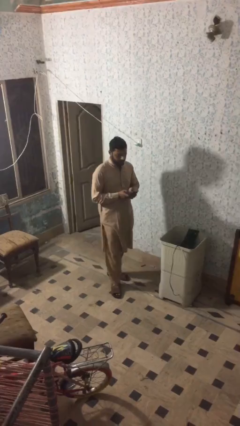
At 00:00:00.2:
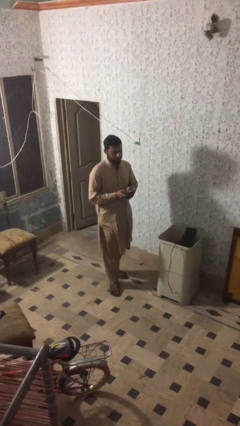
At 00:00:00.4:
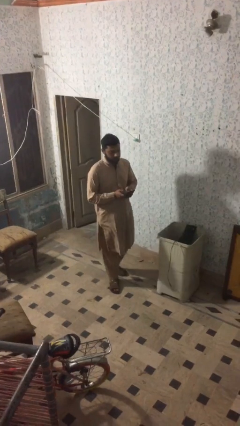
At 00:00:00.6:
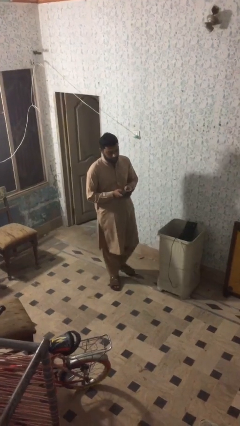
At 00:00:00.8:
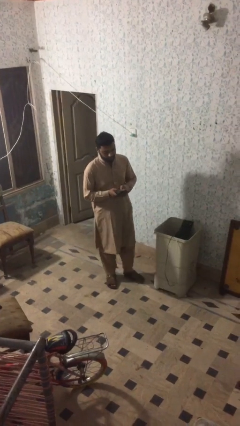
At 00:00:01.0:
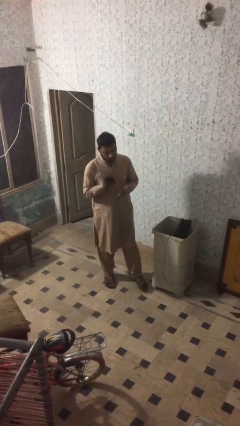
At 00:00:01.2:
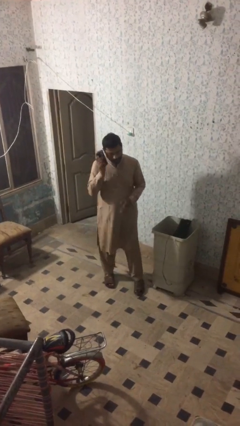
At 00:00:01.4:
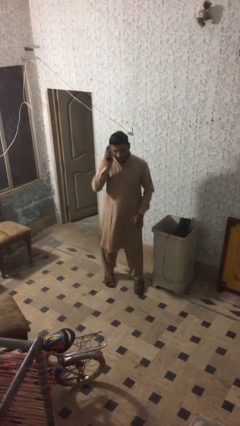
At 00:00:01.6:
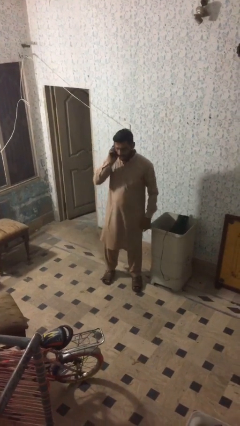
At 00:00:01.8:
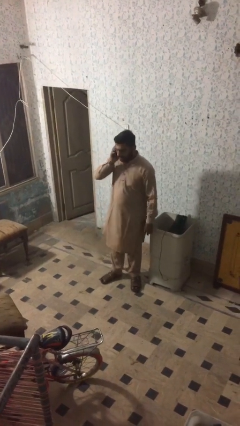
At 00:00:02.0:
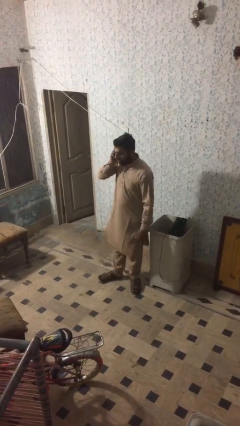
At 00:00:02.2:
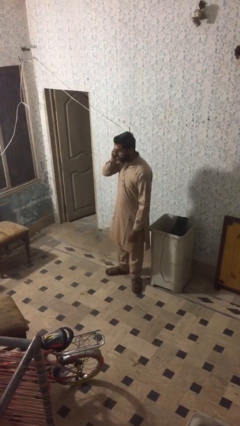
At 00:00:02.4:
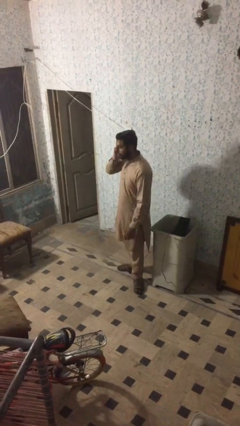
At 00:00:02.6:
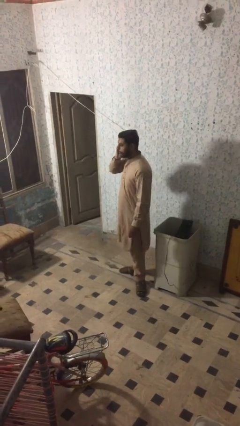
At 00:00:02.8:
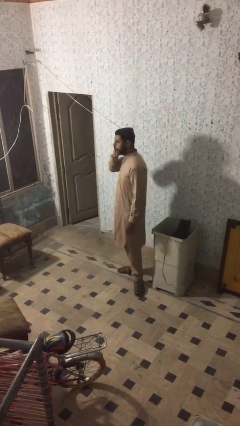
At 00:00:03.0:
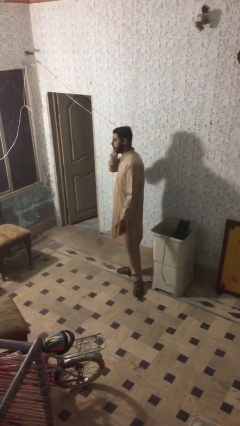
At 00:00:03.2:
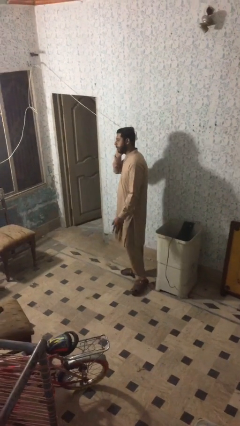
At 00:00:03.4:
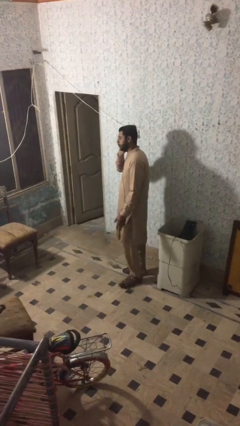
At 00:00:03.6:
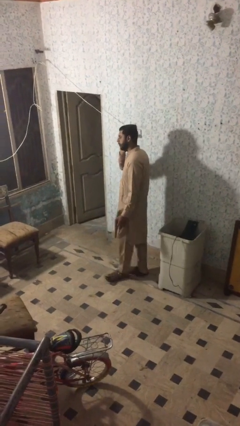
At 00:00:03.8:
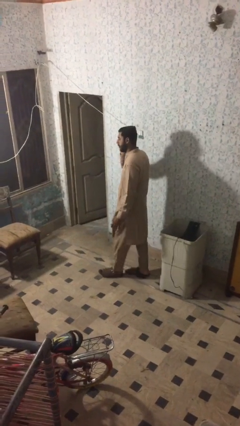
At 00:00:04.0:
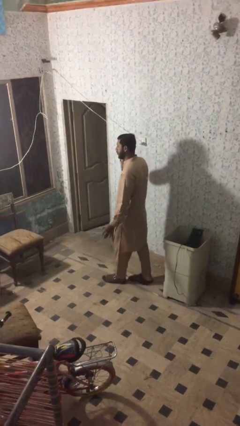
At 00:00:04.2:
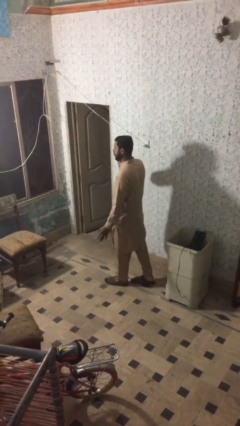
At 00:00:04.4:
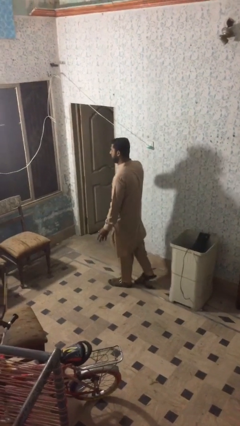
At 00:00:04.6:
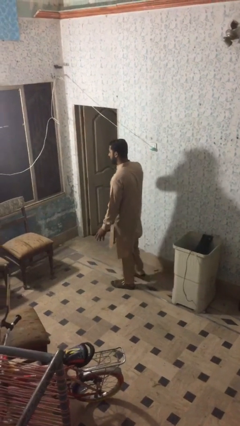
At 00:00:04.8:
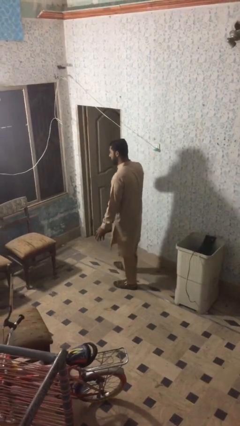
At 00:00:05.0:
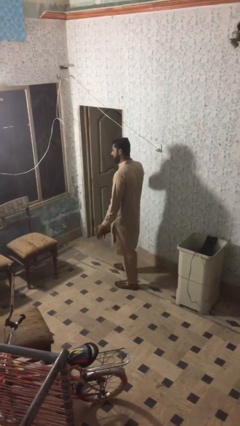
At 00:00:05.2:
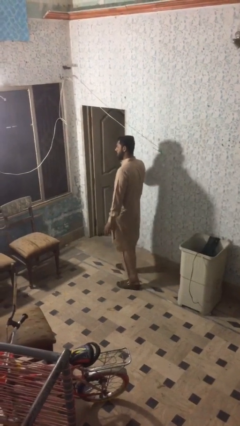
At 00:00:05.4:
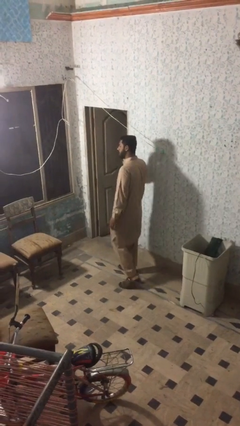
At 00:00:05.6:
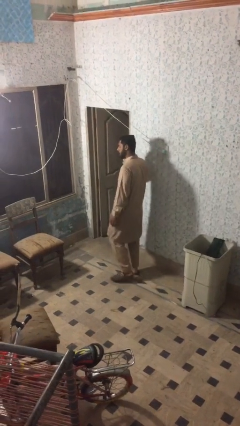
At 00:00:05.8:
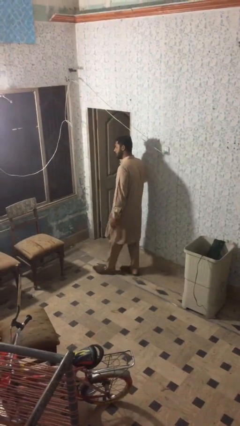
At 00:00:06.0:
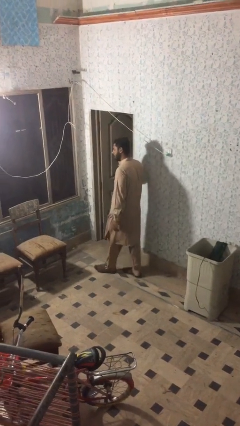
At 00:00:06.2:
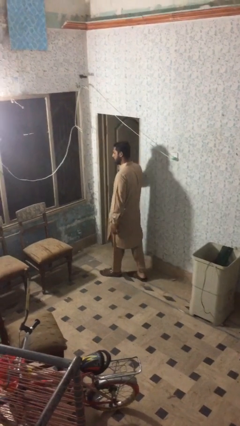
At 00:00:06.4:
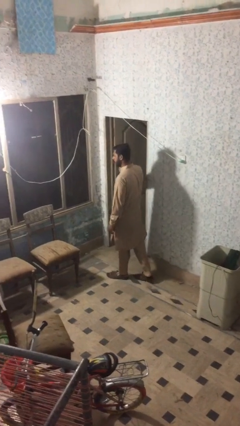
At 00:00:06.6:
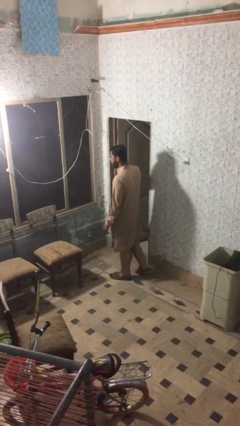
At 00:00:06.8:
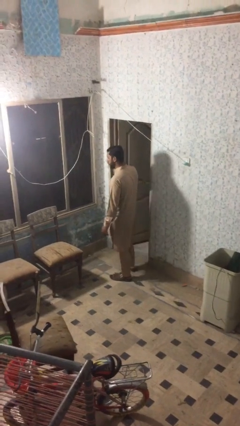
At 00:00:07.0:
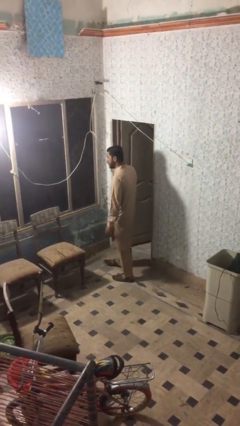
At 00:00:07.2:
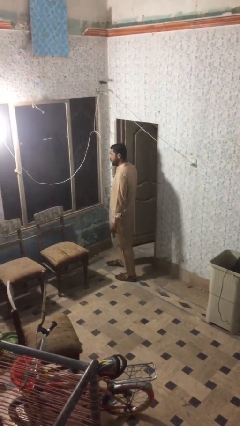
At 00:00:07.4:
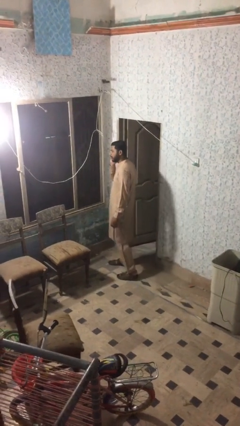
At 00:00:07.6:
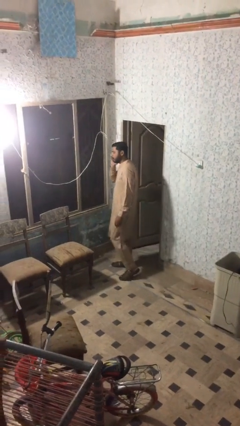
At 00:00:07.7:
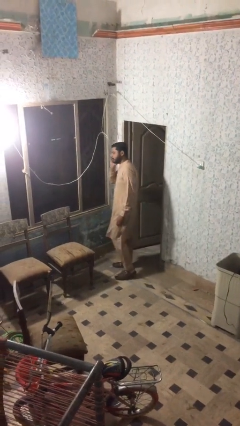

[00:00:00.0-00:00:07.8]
person talks on phone

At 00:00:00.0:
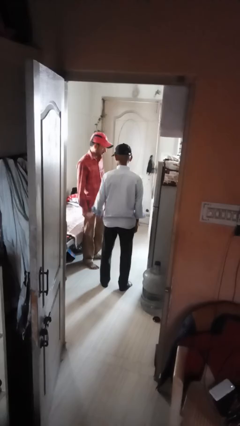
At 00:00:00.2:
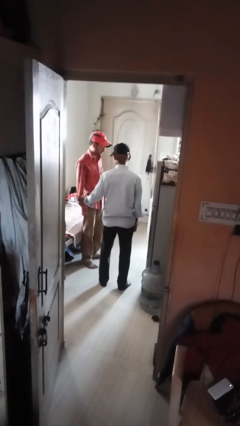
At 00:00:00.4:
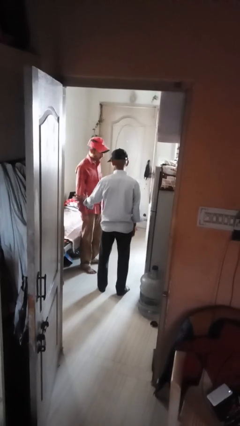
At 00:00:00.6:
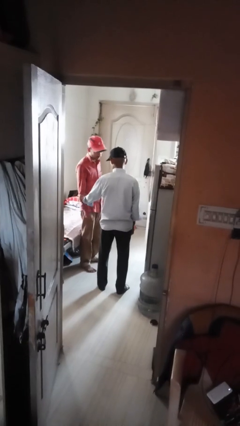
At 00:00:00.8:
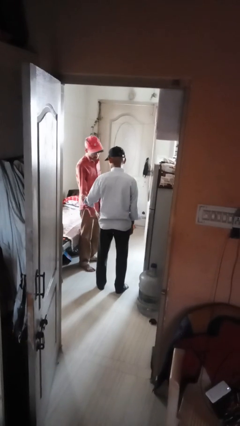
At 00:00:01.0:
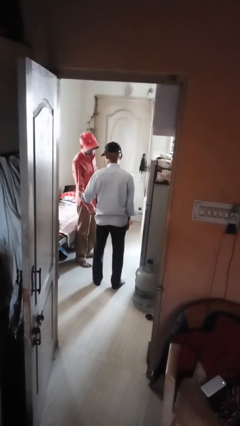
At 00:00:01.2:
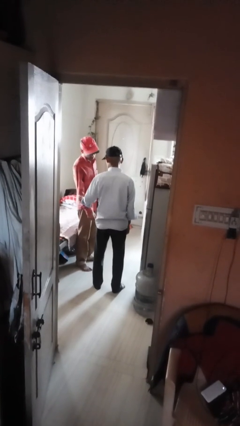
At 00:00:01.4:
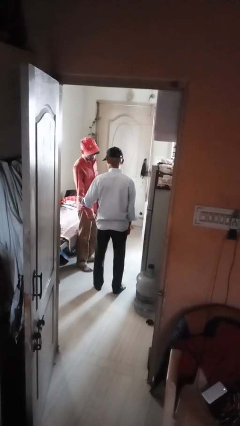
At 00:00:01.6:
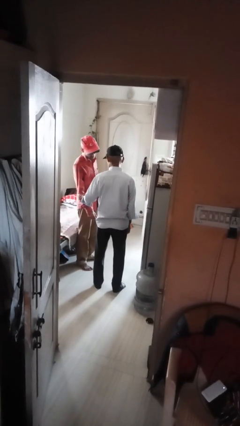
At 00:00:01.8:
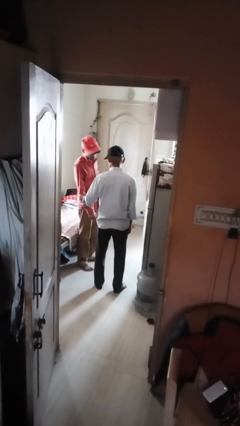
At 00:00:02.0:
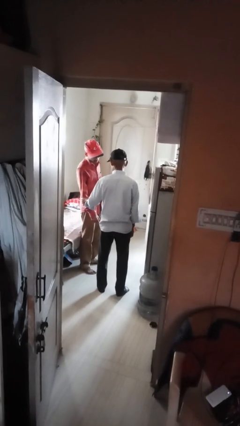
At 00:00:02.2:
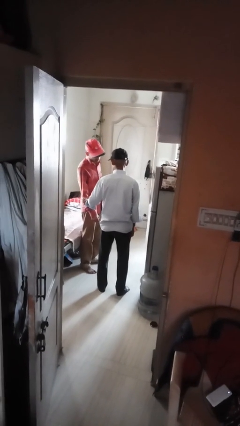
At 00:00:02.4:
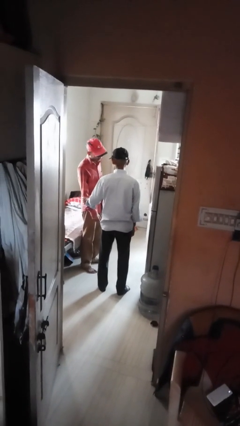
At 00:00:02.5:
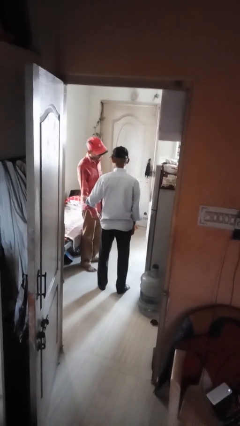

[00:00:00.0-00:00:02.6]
person grabs person by forearm

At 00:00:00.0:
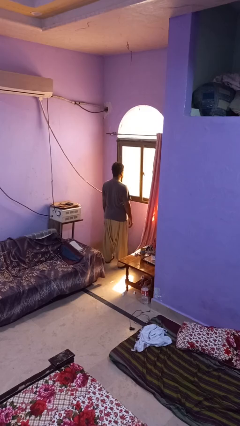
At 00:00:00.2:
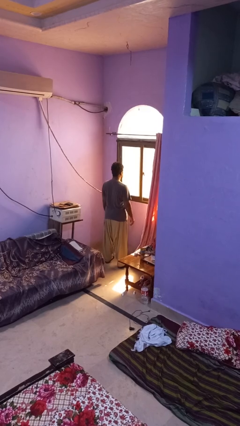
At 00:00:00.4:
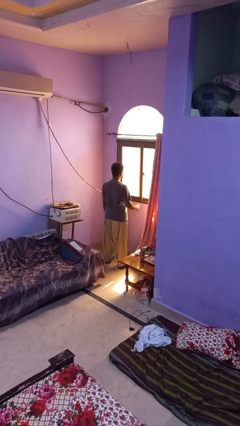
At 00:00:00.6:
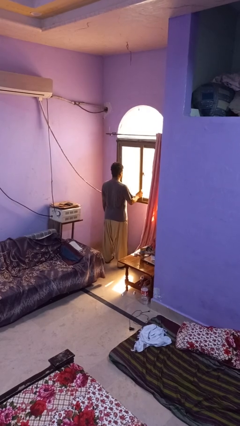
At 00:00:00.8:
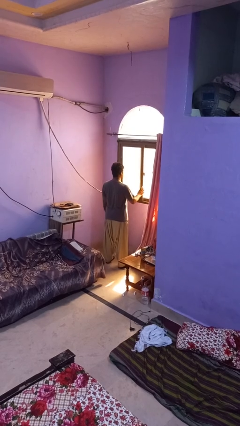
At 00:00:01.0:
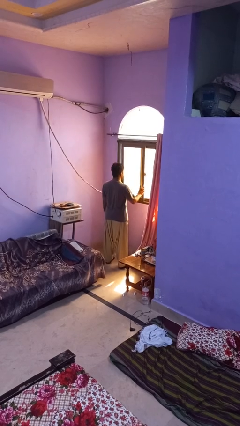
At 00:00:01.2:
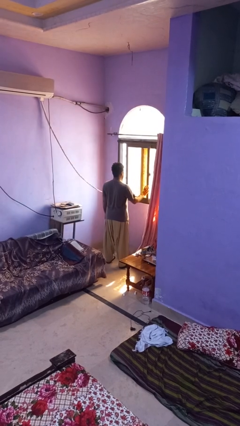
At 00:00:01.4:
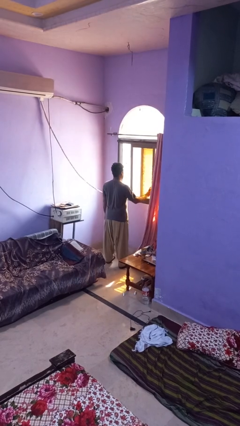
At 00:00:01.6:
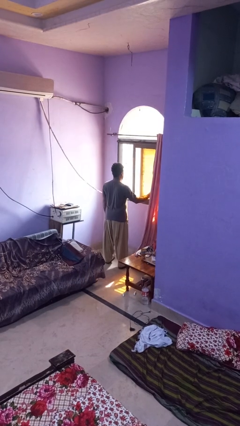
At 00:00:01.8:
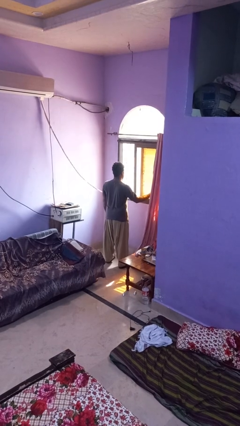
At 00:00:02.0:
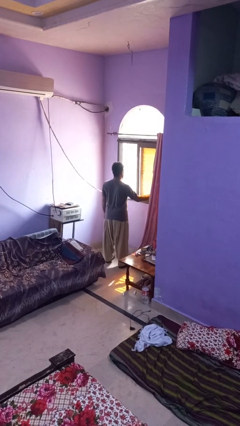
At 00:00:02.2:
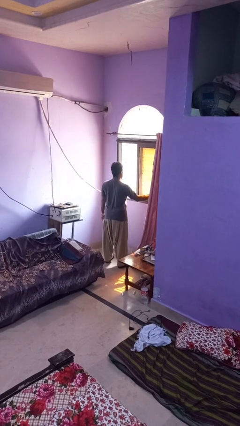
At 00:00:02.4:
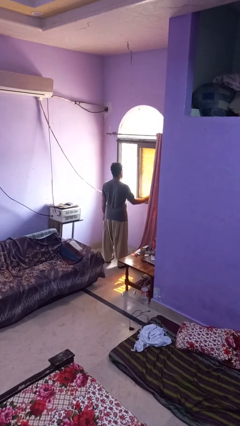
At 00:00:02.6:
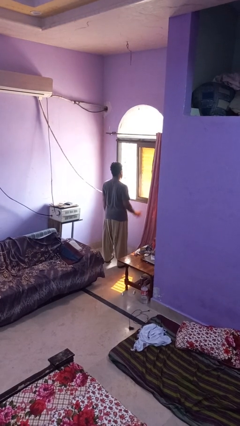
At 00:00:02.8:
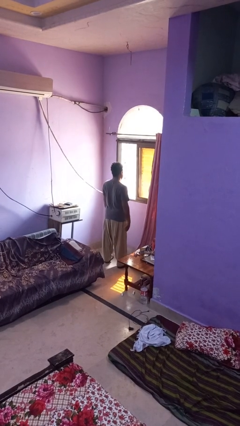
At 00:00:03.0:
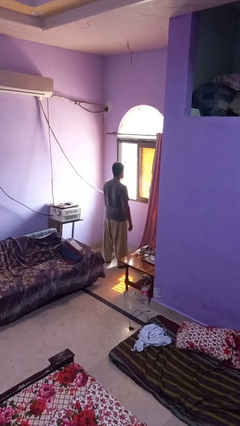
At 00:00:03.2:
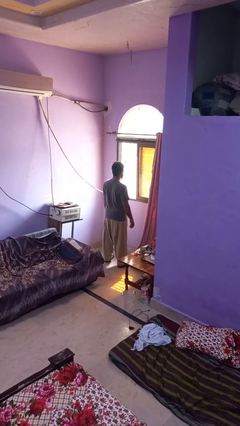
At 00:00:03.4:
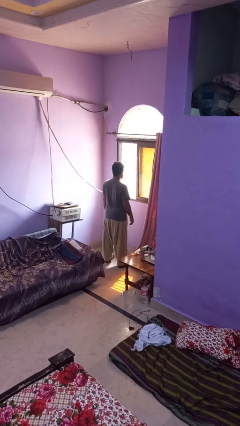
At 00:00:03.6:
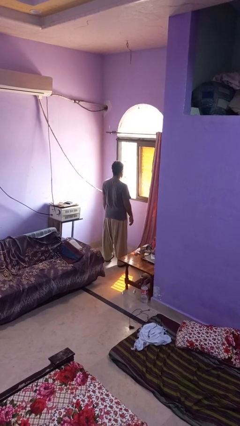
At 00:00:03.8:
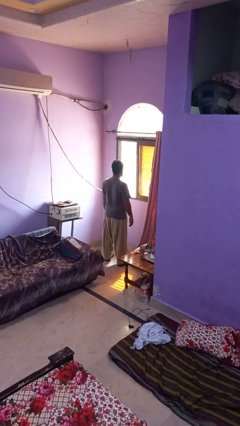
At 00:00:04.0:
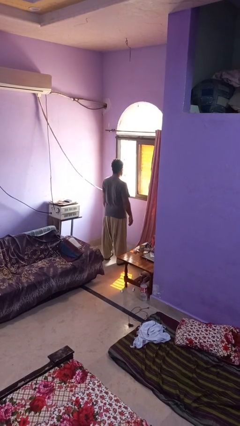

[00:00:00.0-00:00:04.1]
person opens home window

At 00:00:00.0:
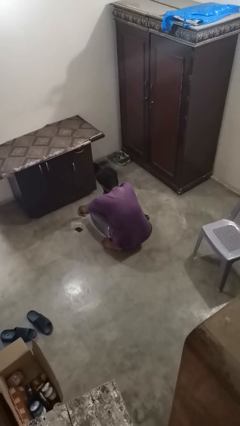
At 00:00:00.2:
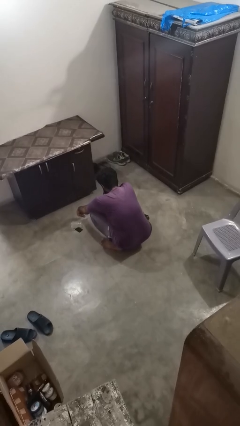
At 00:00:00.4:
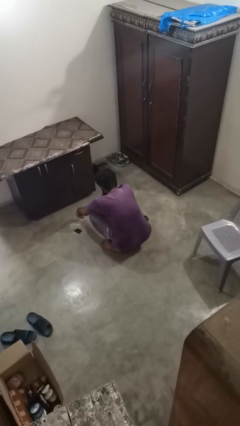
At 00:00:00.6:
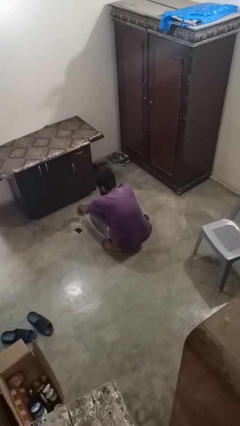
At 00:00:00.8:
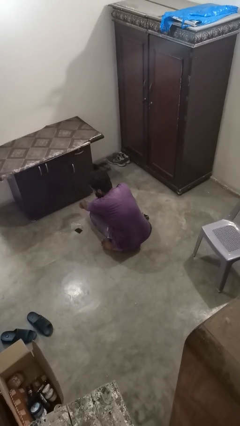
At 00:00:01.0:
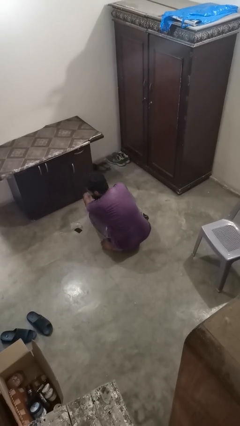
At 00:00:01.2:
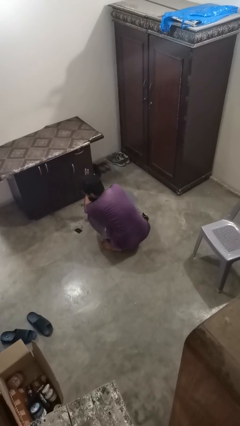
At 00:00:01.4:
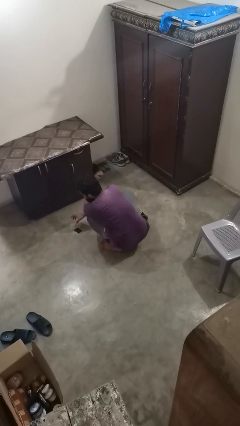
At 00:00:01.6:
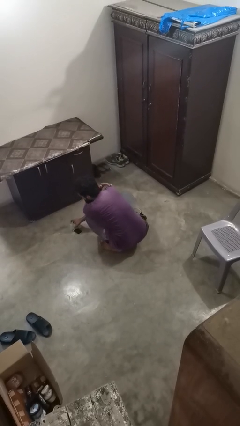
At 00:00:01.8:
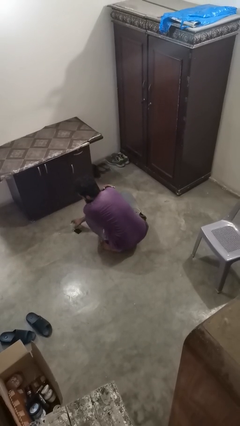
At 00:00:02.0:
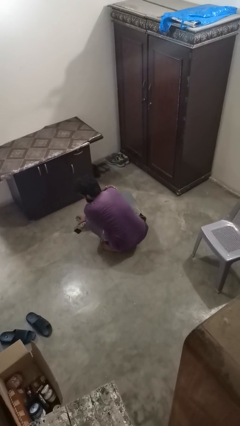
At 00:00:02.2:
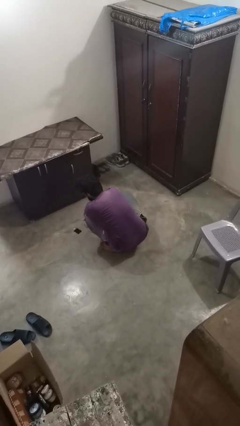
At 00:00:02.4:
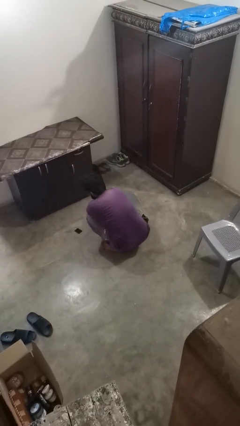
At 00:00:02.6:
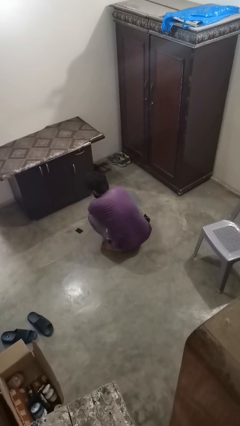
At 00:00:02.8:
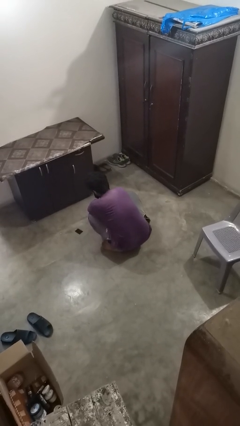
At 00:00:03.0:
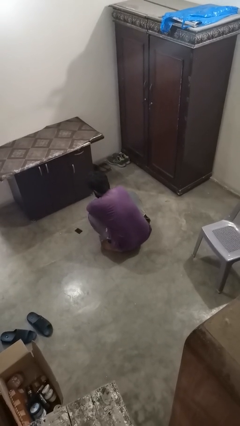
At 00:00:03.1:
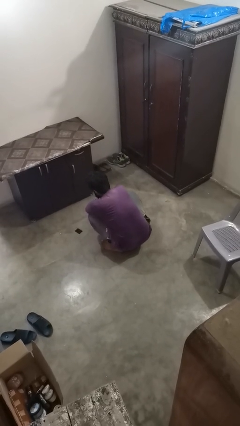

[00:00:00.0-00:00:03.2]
person sets upright glass
